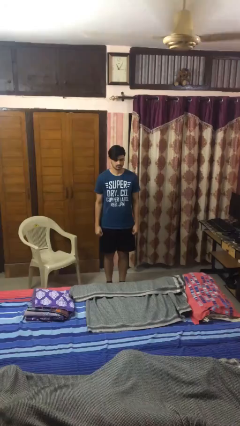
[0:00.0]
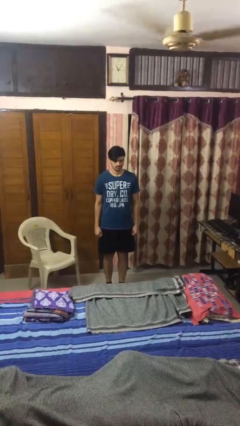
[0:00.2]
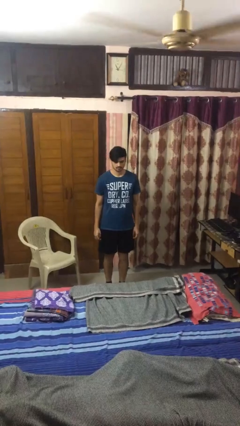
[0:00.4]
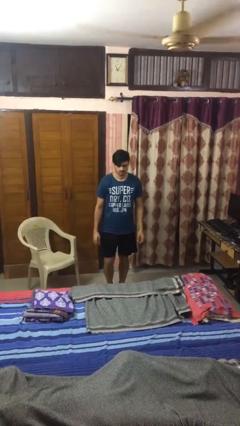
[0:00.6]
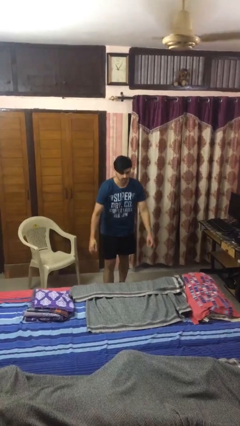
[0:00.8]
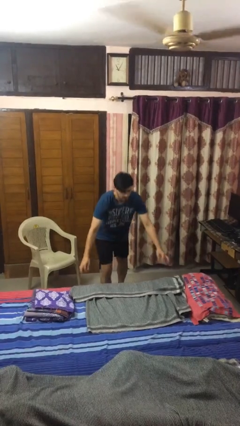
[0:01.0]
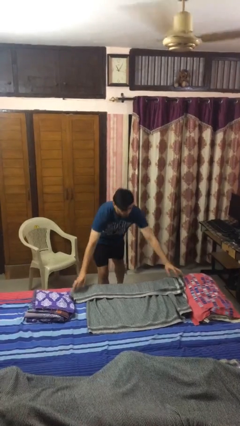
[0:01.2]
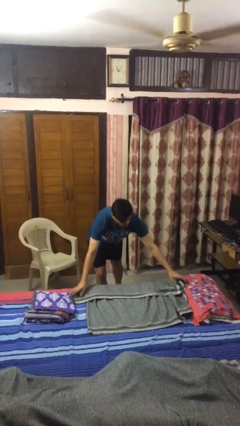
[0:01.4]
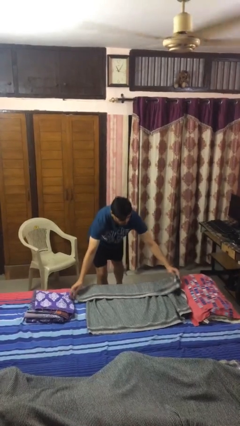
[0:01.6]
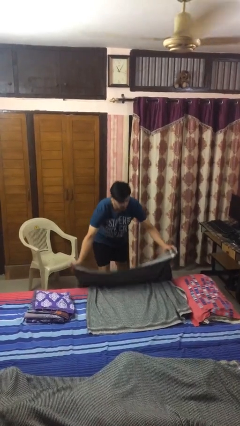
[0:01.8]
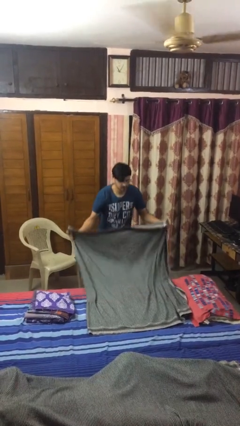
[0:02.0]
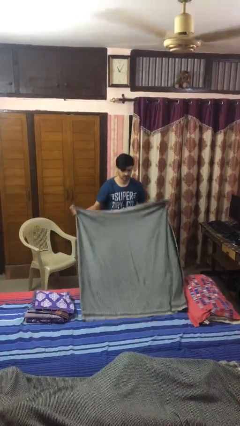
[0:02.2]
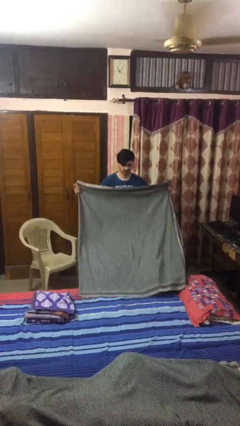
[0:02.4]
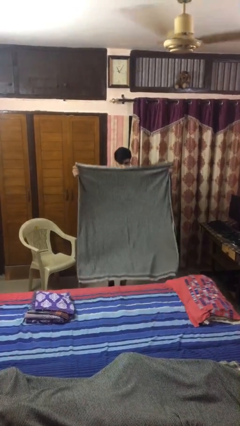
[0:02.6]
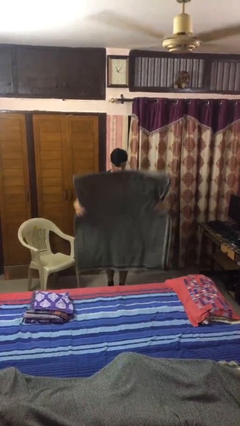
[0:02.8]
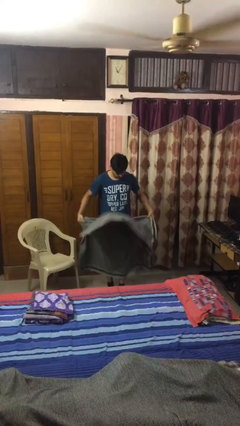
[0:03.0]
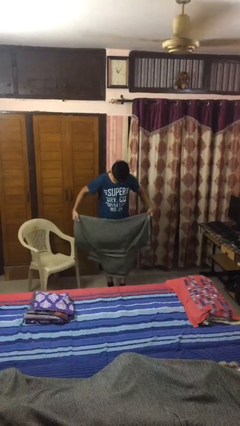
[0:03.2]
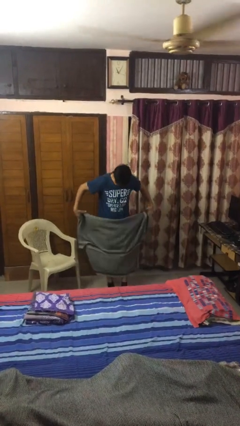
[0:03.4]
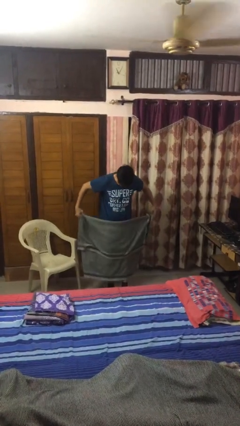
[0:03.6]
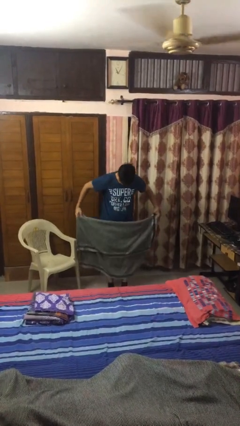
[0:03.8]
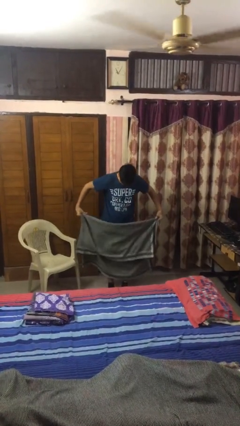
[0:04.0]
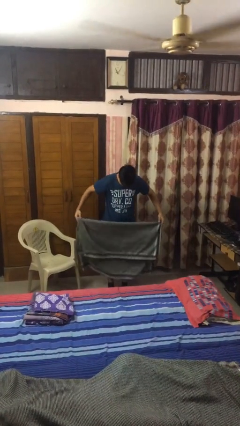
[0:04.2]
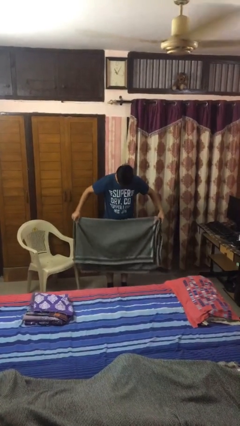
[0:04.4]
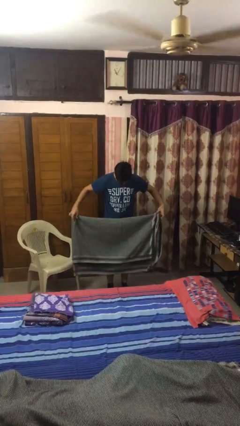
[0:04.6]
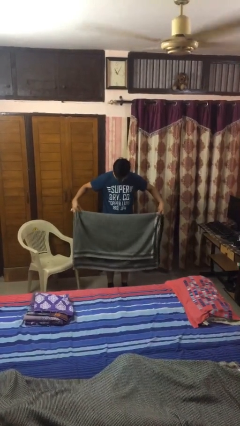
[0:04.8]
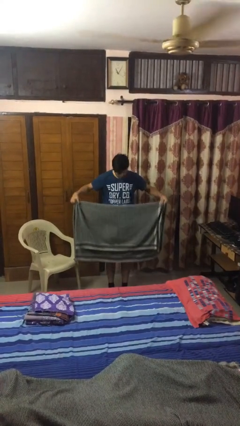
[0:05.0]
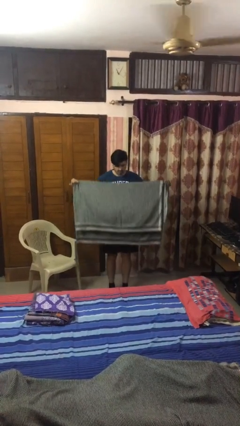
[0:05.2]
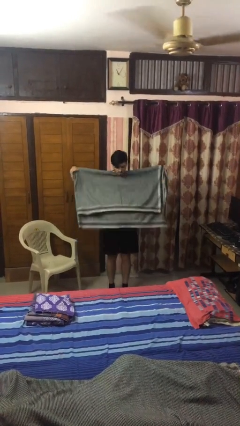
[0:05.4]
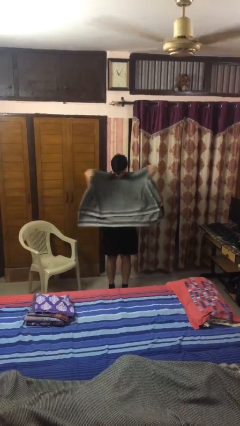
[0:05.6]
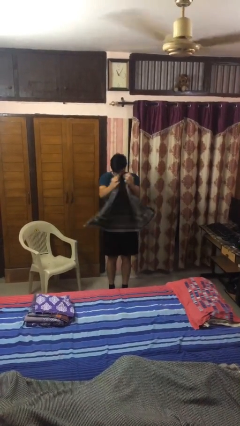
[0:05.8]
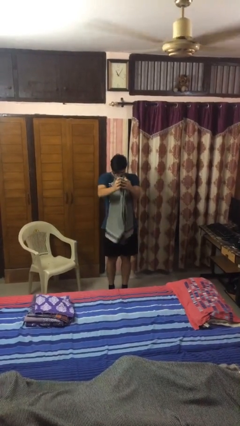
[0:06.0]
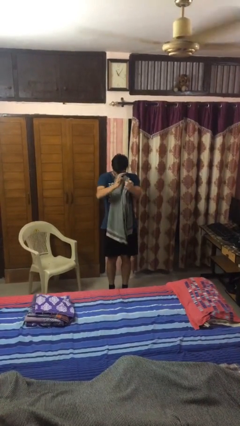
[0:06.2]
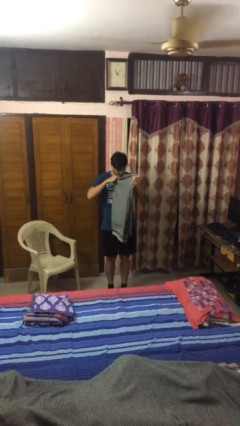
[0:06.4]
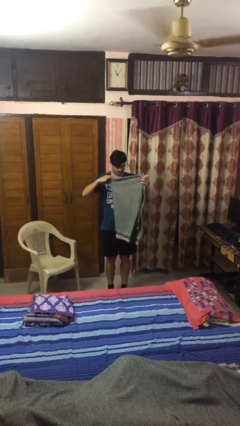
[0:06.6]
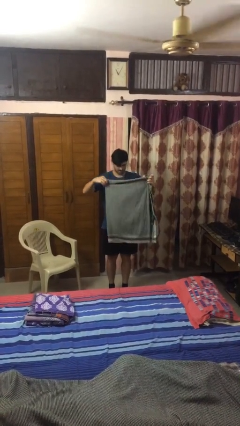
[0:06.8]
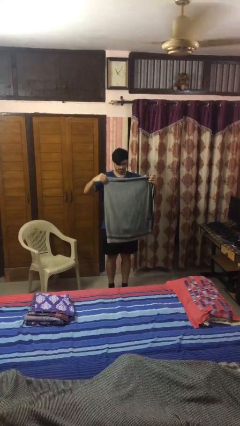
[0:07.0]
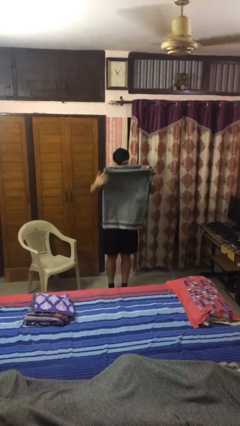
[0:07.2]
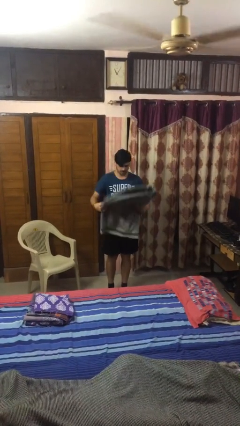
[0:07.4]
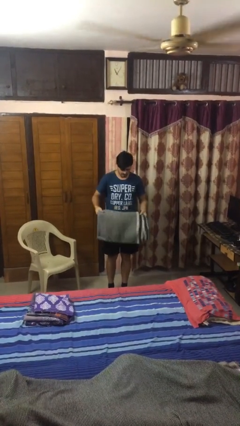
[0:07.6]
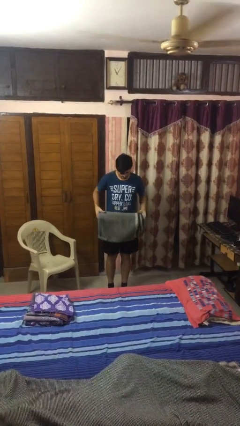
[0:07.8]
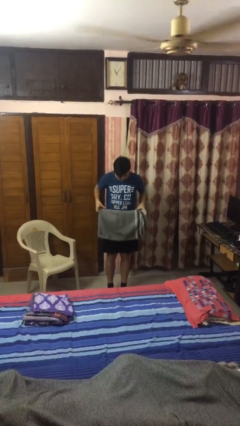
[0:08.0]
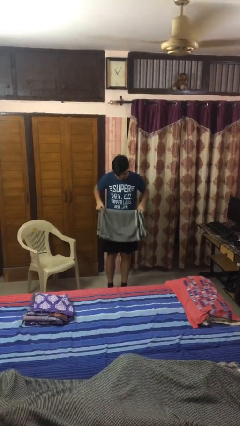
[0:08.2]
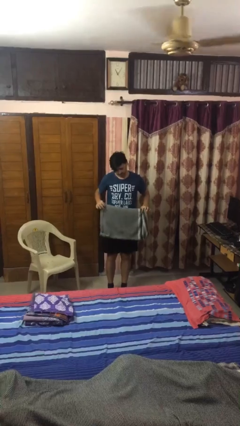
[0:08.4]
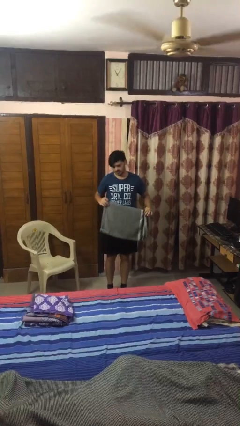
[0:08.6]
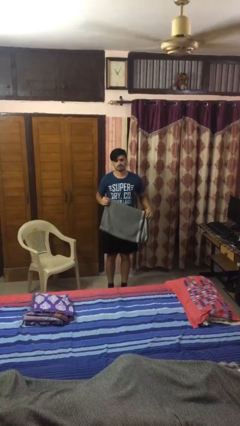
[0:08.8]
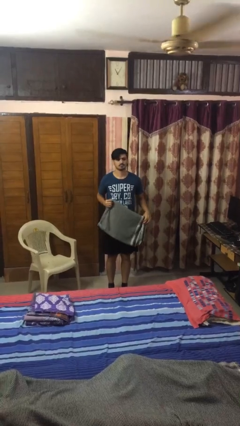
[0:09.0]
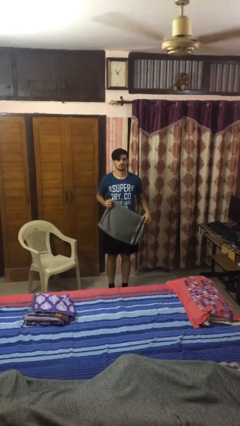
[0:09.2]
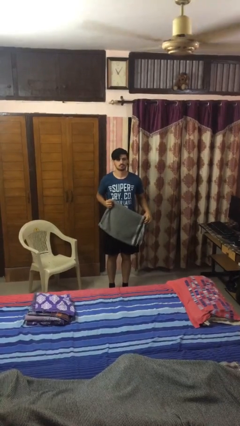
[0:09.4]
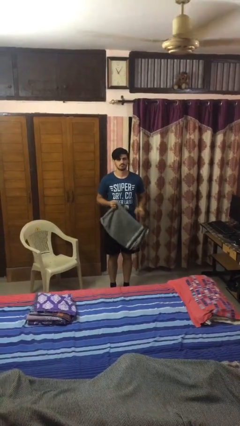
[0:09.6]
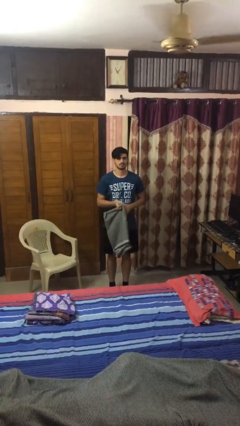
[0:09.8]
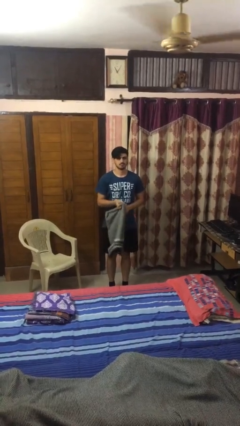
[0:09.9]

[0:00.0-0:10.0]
person folds blanket

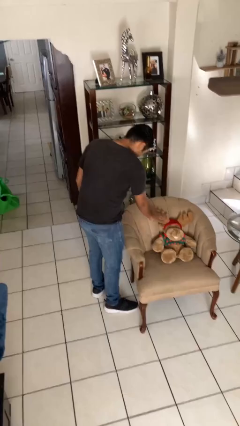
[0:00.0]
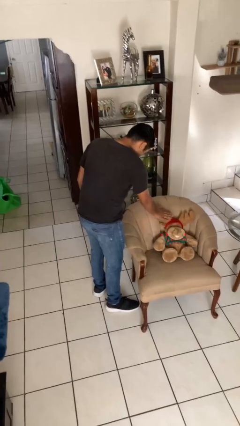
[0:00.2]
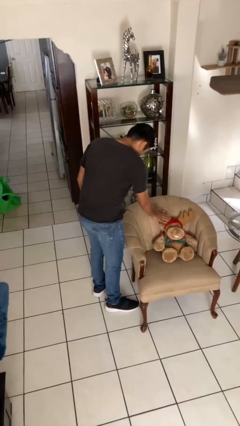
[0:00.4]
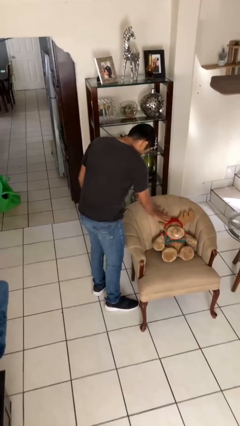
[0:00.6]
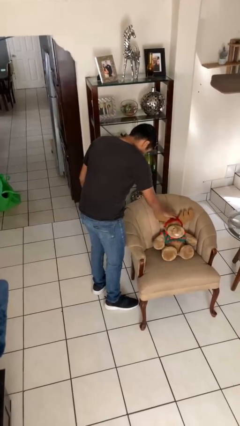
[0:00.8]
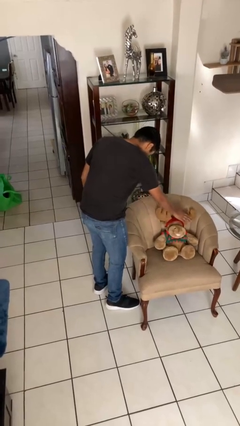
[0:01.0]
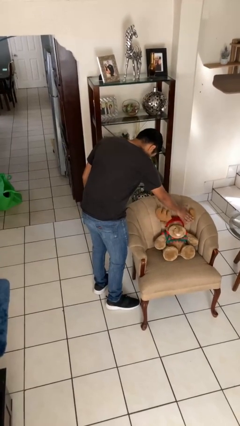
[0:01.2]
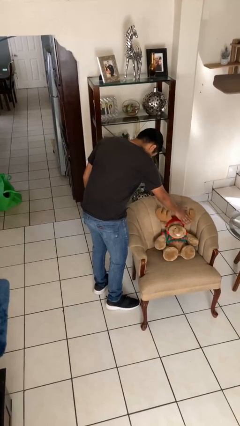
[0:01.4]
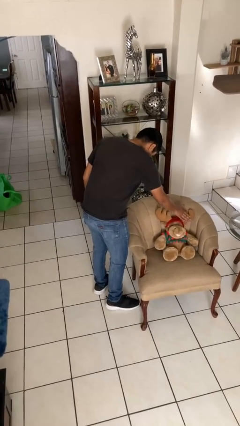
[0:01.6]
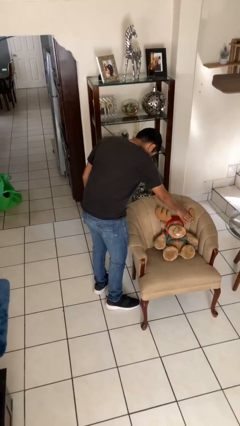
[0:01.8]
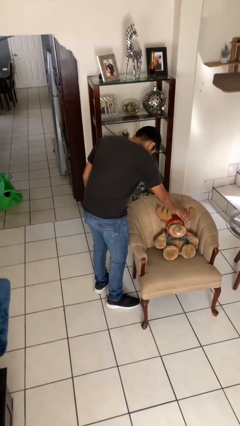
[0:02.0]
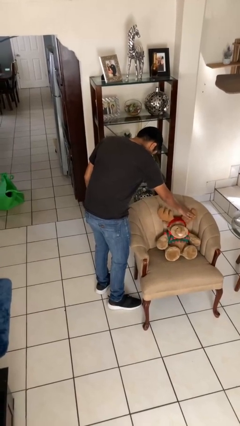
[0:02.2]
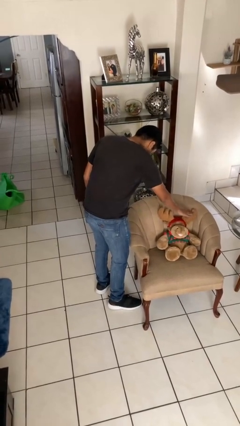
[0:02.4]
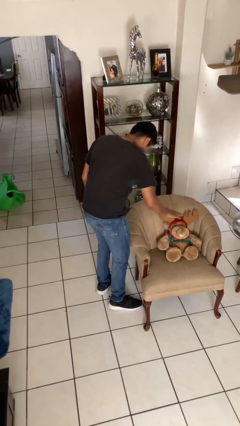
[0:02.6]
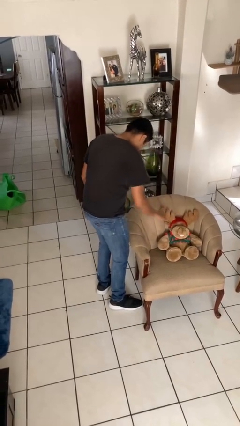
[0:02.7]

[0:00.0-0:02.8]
person waves hand over object

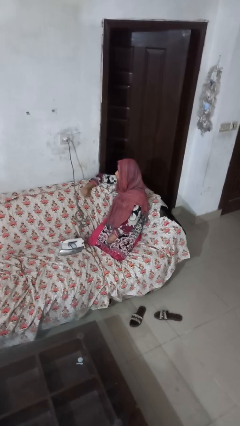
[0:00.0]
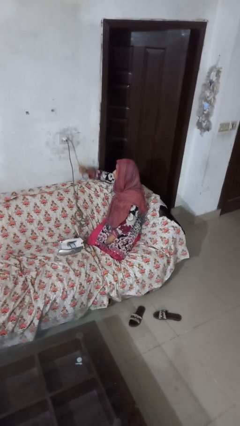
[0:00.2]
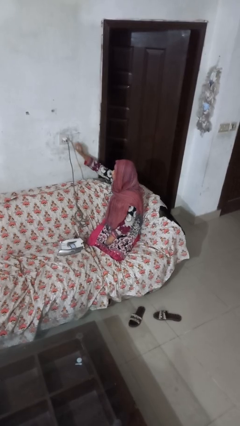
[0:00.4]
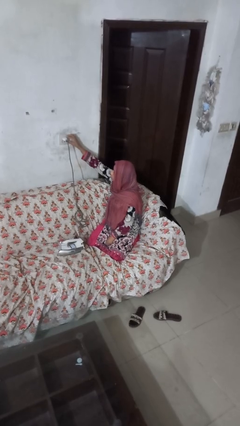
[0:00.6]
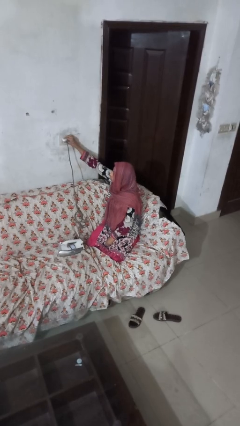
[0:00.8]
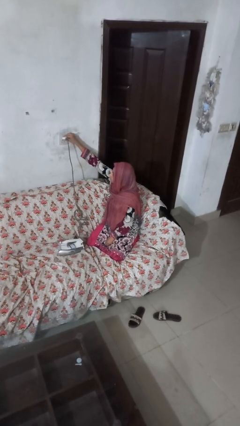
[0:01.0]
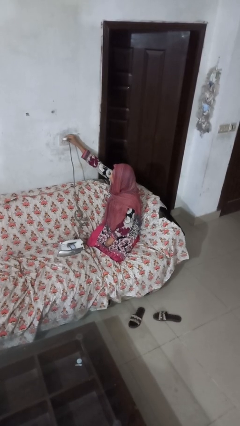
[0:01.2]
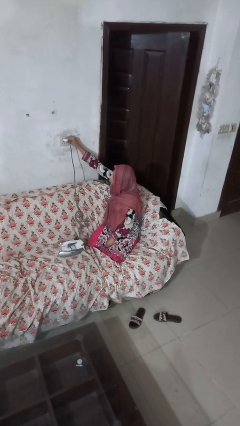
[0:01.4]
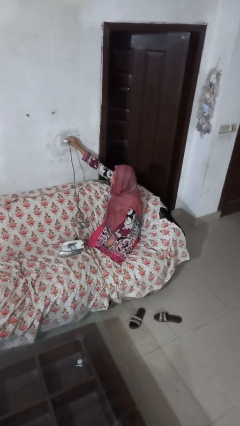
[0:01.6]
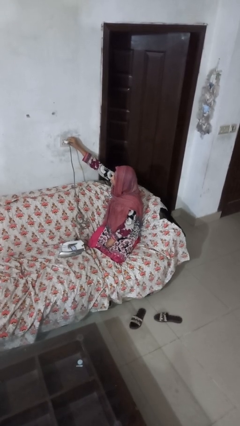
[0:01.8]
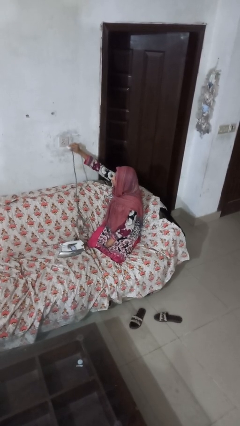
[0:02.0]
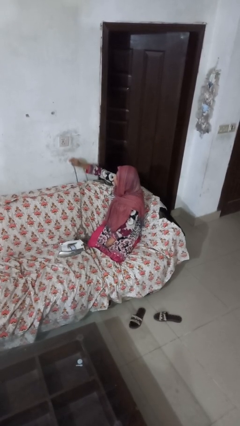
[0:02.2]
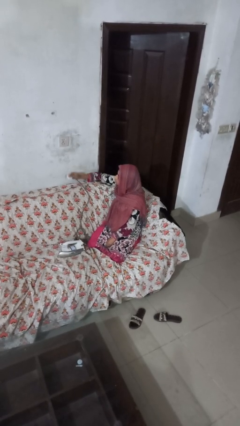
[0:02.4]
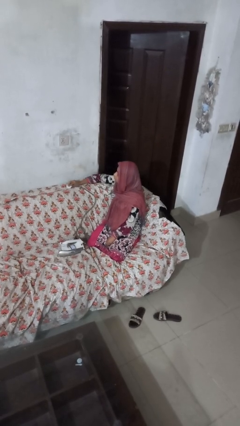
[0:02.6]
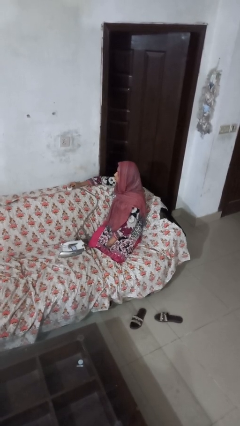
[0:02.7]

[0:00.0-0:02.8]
person unplugs from electrical socket

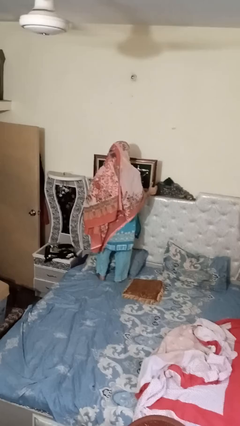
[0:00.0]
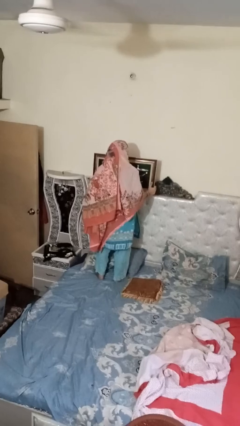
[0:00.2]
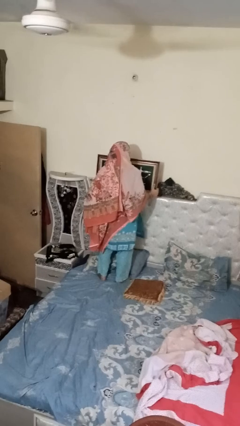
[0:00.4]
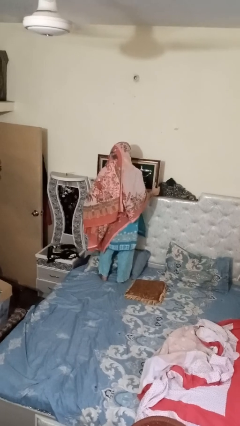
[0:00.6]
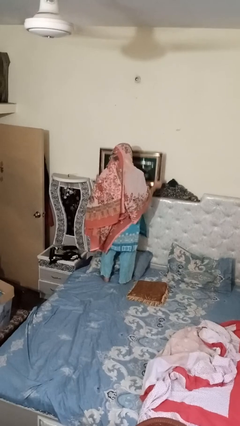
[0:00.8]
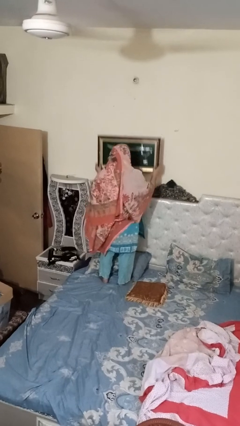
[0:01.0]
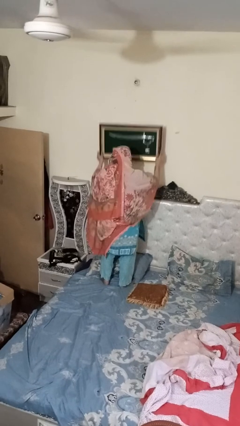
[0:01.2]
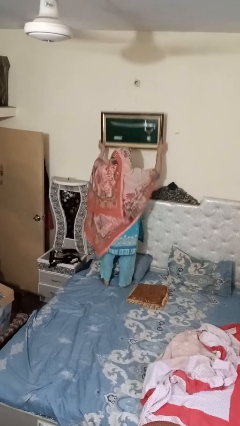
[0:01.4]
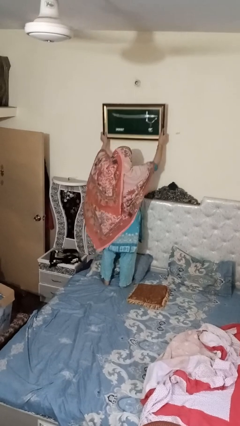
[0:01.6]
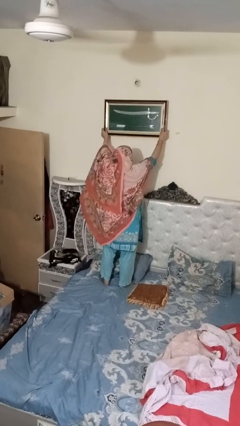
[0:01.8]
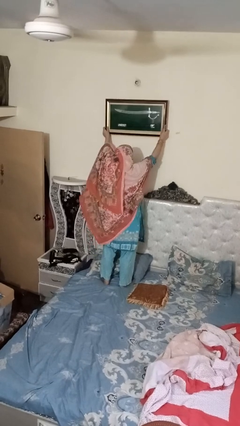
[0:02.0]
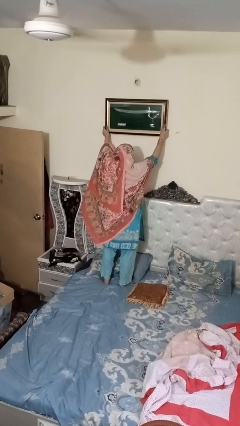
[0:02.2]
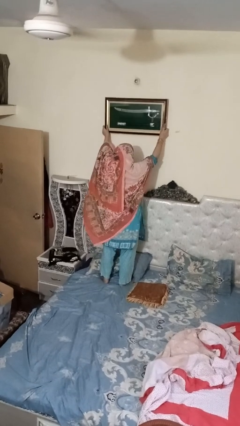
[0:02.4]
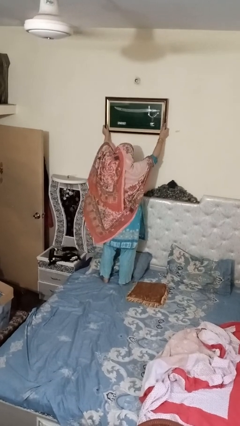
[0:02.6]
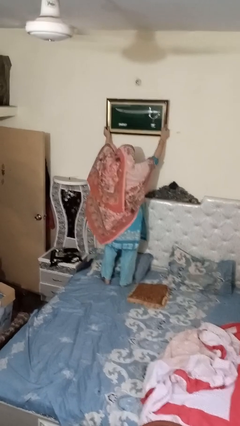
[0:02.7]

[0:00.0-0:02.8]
person takes down picture frame
